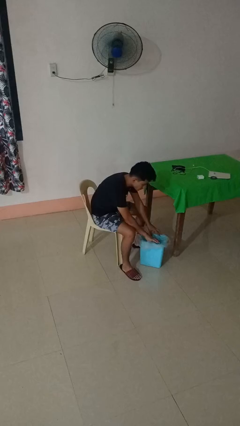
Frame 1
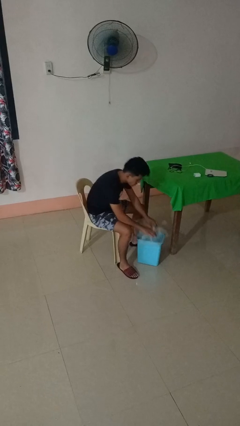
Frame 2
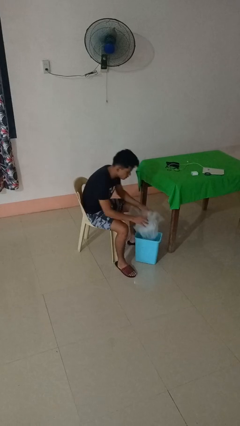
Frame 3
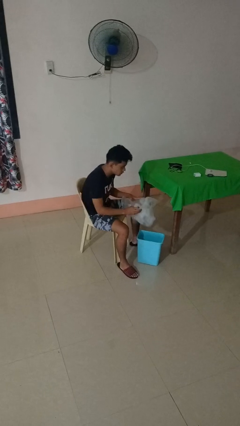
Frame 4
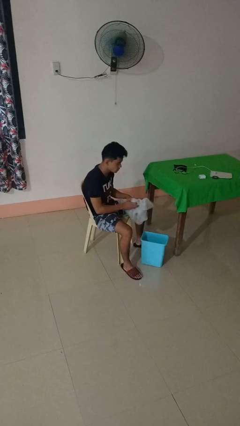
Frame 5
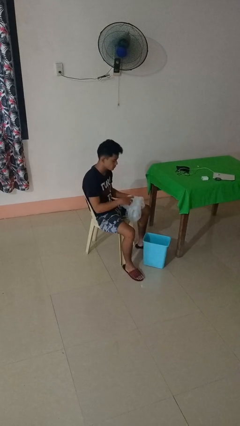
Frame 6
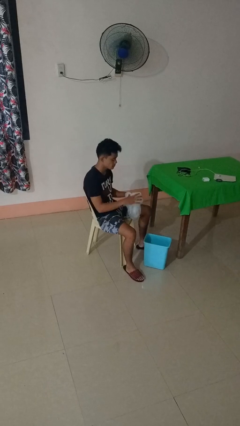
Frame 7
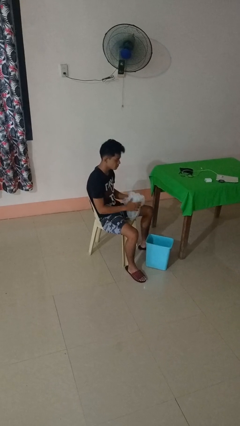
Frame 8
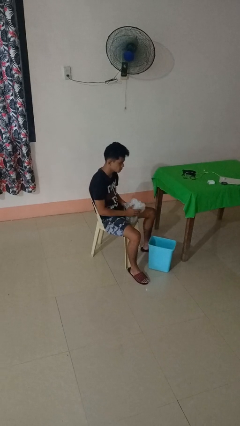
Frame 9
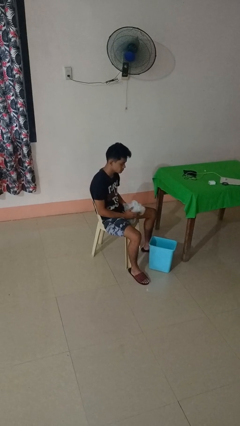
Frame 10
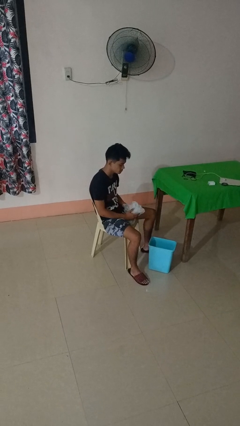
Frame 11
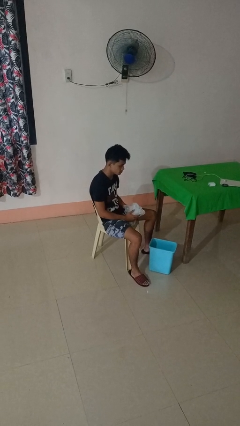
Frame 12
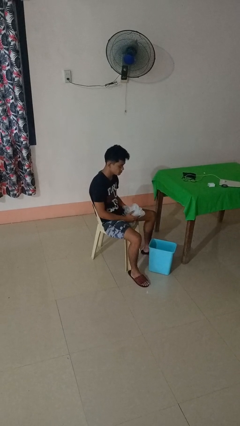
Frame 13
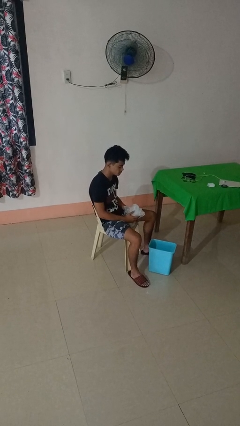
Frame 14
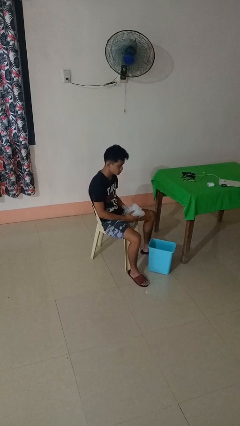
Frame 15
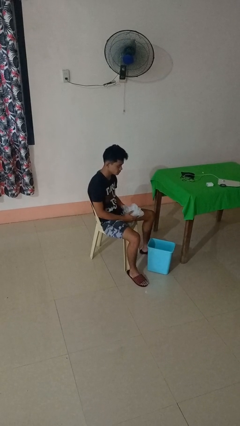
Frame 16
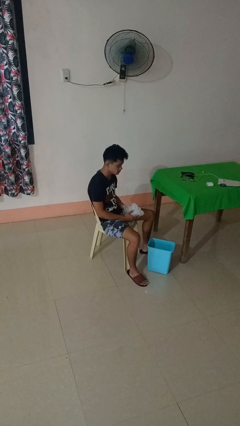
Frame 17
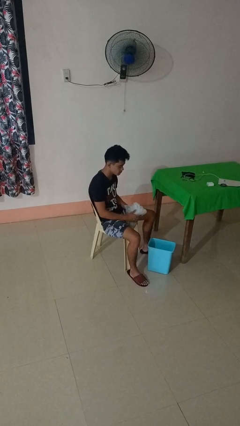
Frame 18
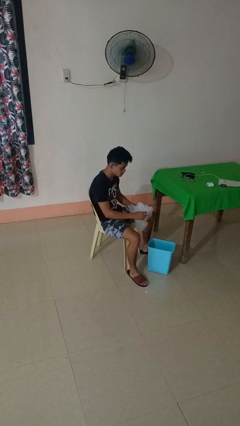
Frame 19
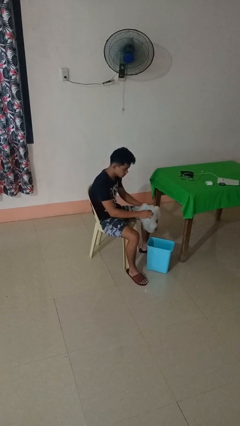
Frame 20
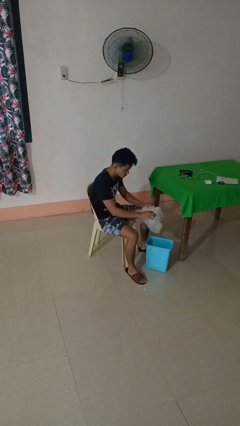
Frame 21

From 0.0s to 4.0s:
person removes trashbag from trashcan

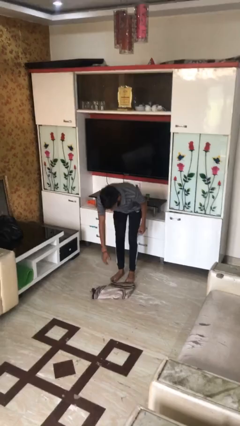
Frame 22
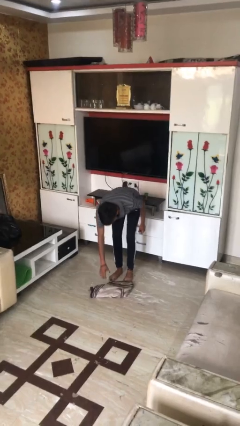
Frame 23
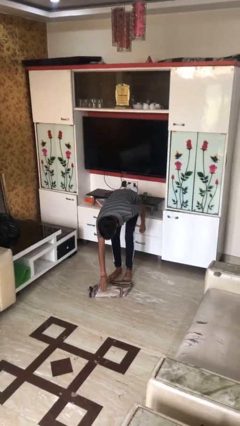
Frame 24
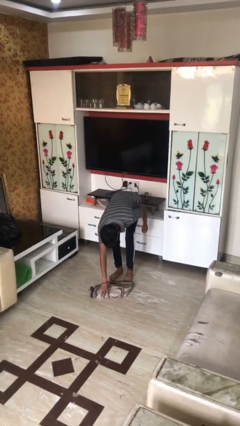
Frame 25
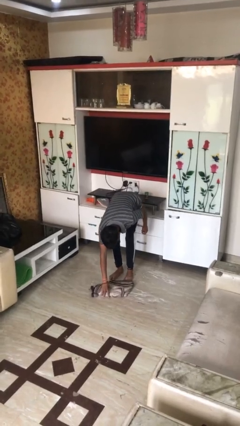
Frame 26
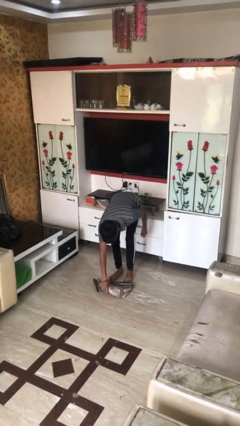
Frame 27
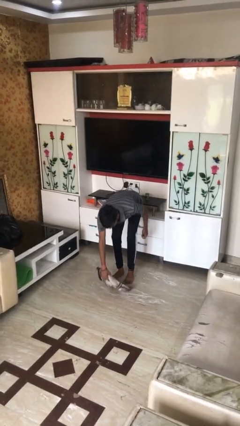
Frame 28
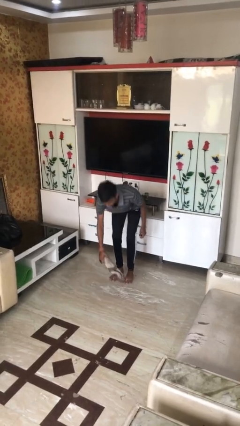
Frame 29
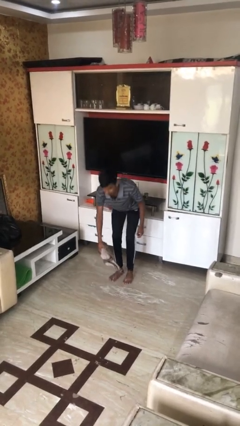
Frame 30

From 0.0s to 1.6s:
person picks up object from floor

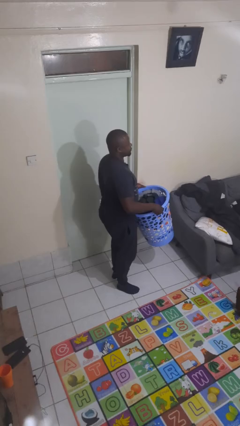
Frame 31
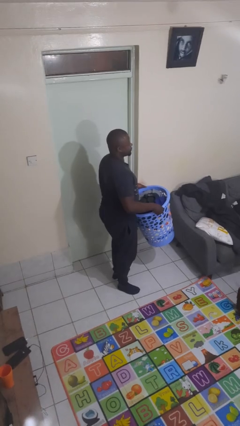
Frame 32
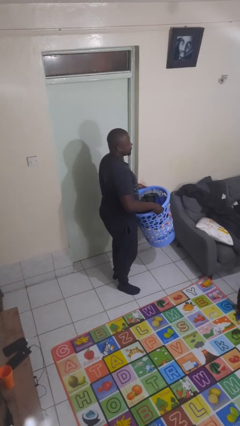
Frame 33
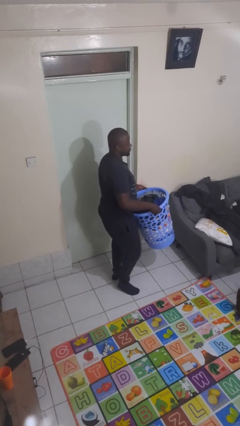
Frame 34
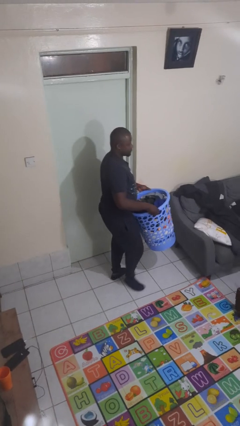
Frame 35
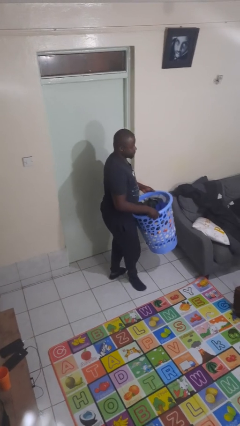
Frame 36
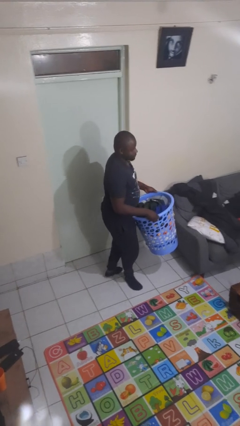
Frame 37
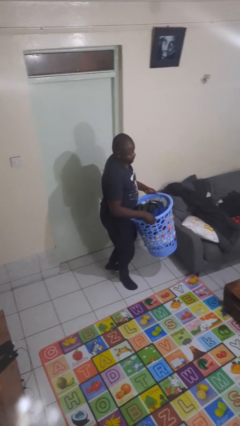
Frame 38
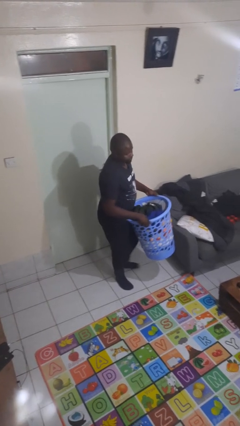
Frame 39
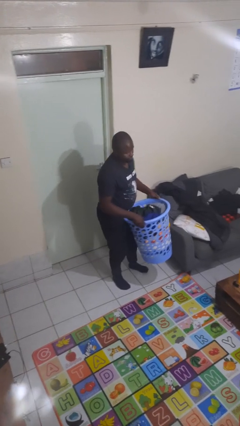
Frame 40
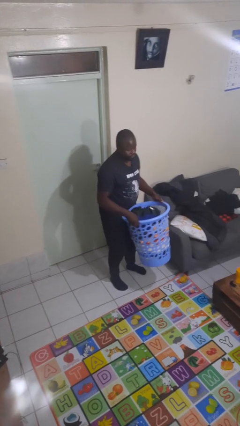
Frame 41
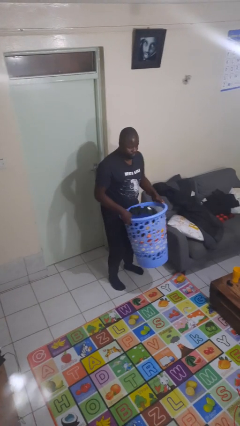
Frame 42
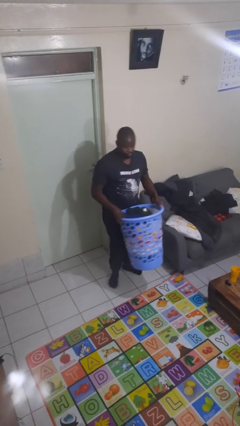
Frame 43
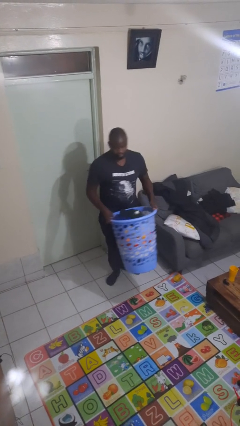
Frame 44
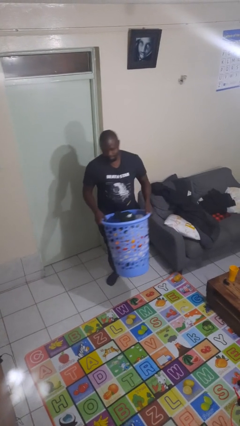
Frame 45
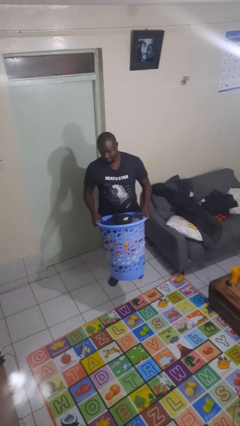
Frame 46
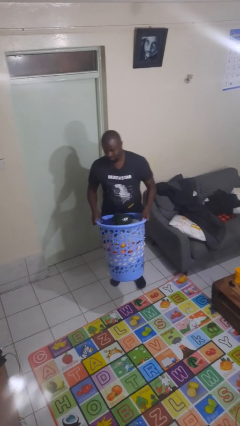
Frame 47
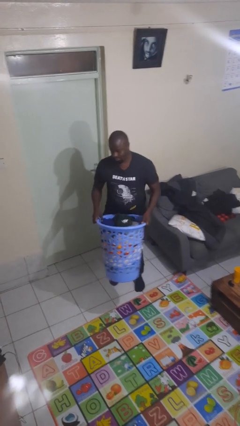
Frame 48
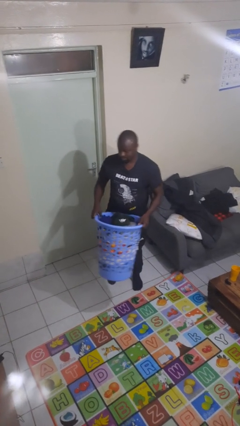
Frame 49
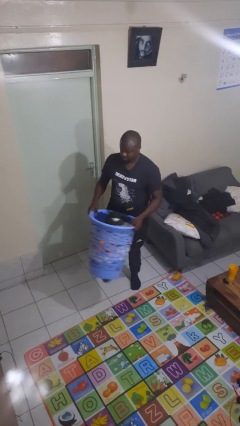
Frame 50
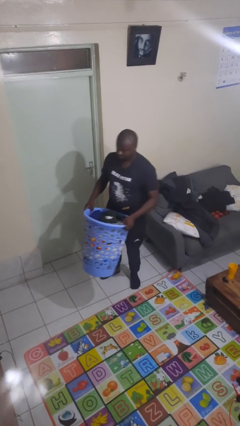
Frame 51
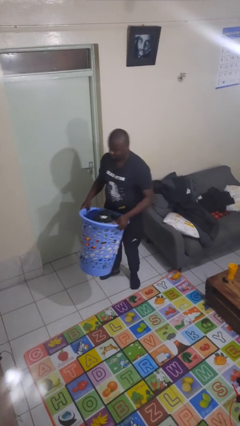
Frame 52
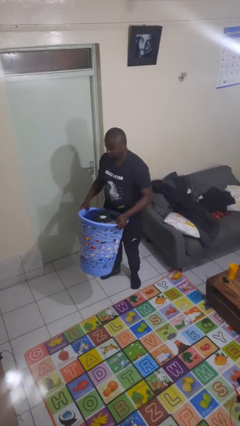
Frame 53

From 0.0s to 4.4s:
person carries laundry basket

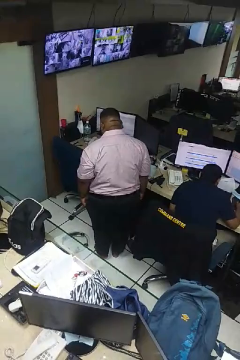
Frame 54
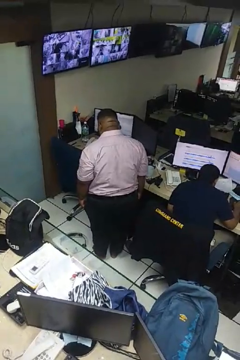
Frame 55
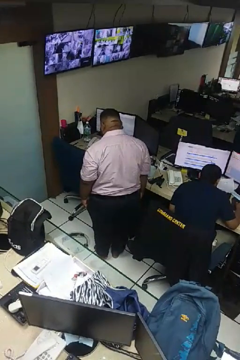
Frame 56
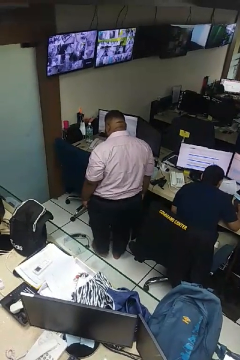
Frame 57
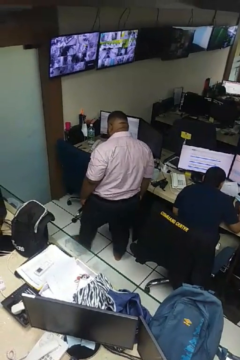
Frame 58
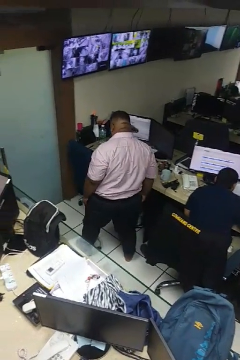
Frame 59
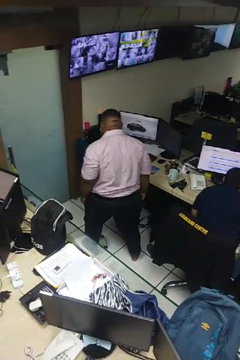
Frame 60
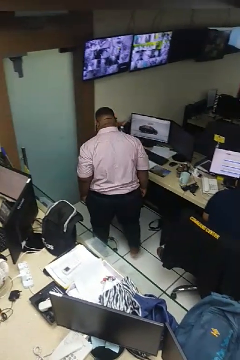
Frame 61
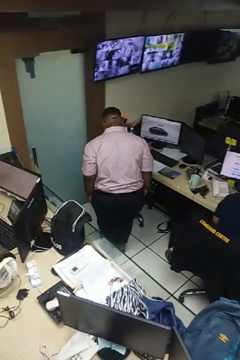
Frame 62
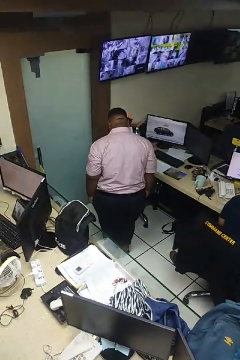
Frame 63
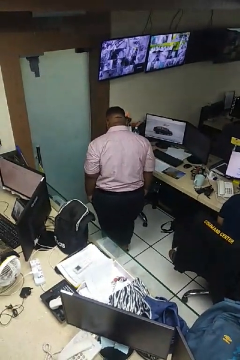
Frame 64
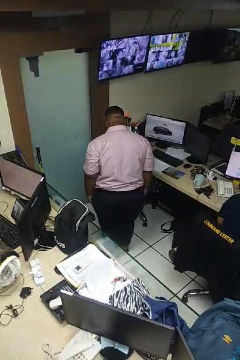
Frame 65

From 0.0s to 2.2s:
person uses bodyweight scale

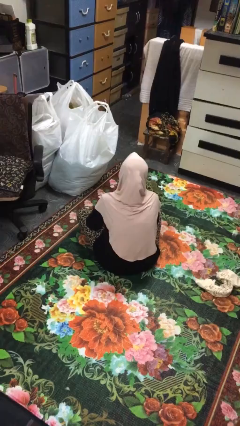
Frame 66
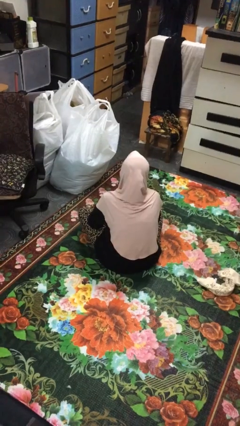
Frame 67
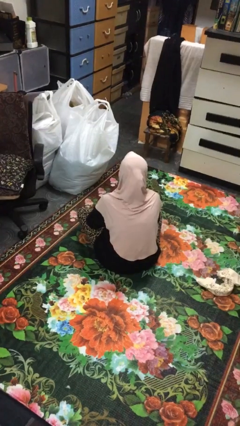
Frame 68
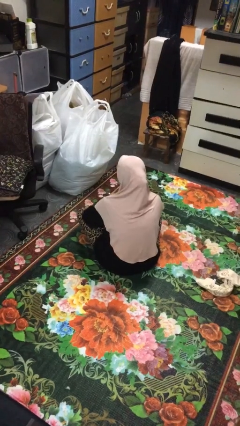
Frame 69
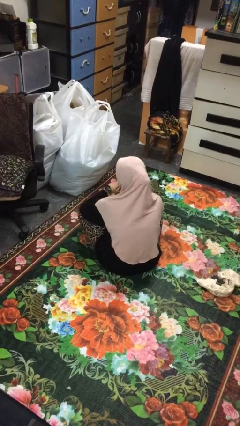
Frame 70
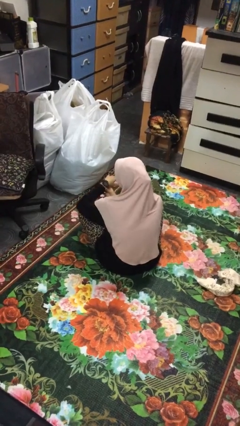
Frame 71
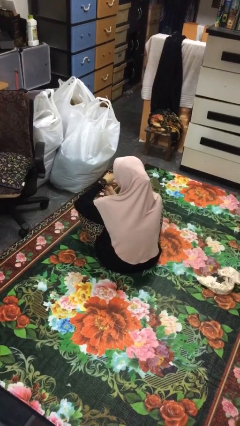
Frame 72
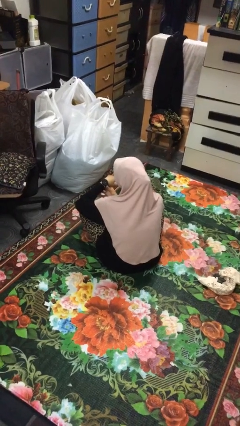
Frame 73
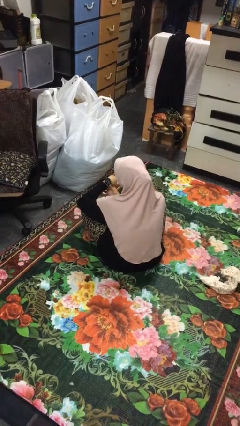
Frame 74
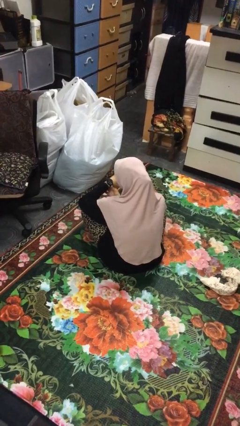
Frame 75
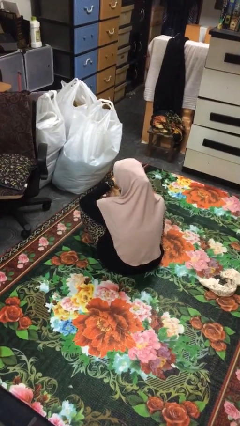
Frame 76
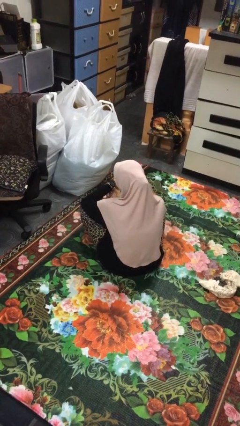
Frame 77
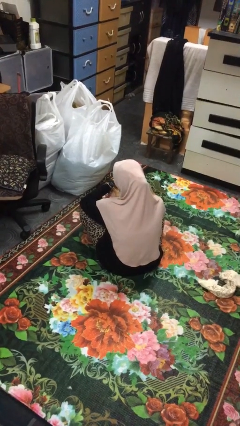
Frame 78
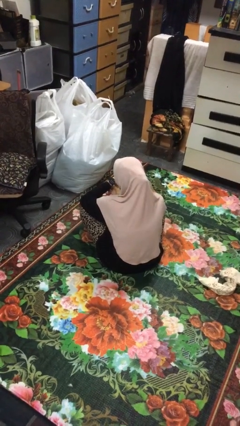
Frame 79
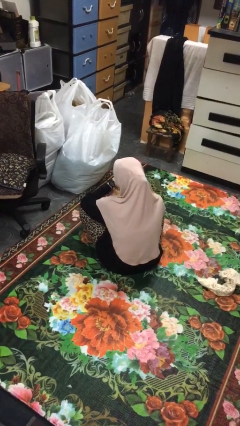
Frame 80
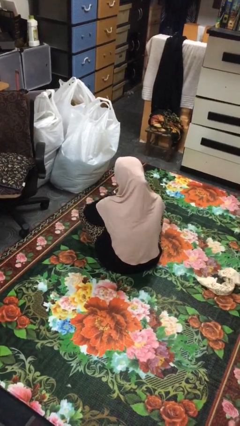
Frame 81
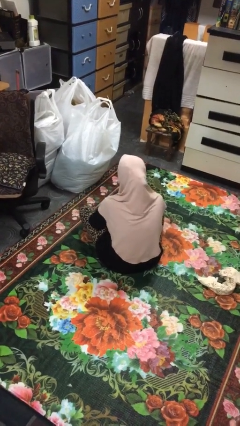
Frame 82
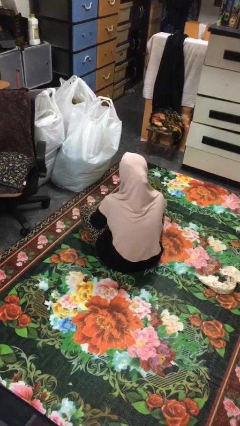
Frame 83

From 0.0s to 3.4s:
person looks at wristwatch

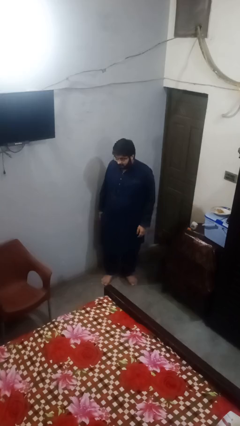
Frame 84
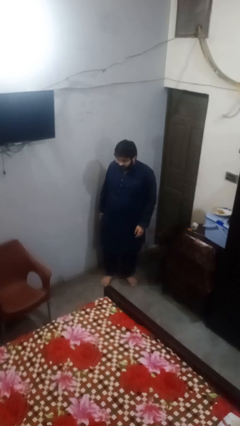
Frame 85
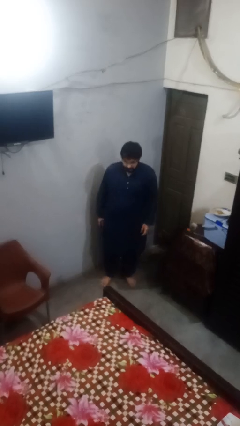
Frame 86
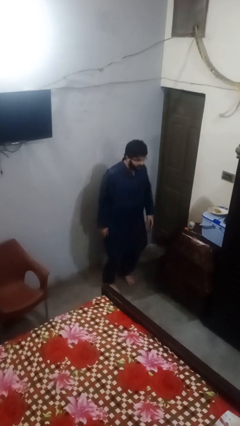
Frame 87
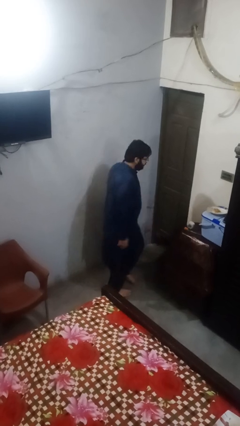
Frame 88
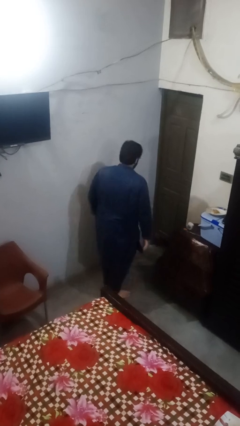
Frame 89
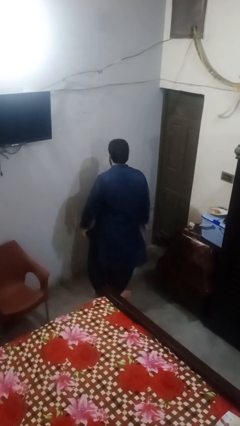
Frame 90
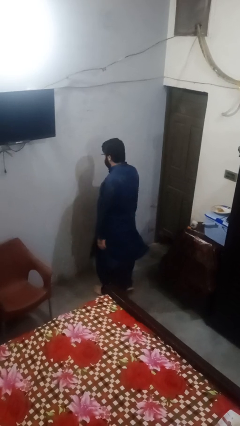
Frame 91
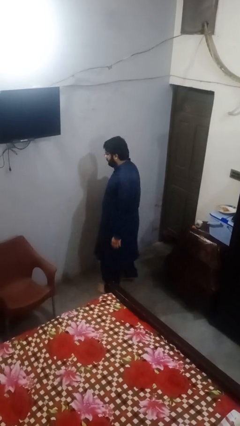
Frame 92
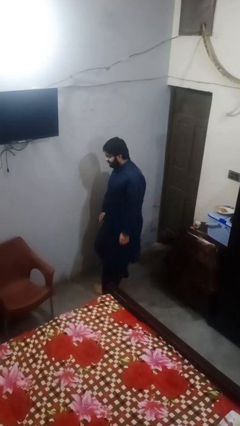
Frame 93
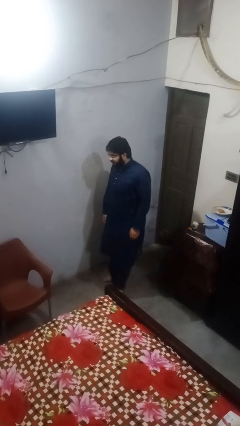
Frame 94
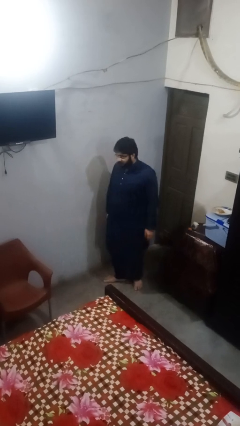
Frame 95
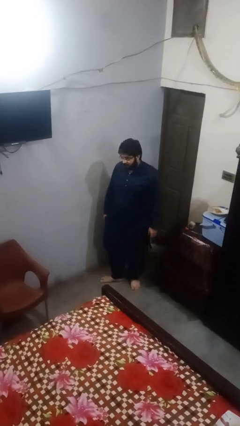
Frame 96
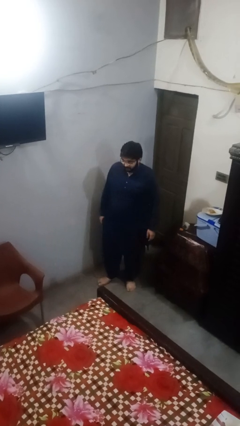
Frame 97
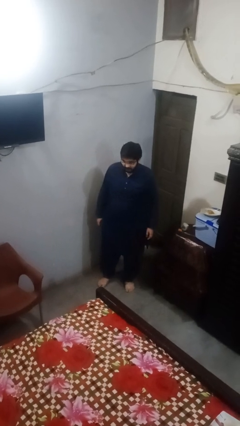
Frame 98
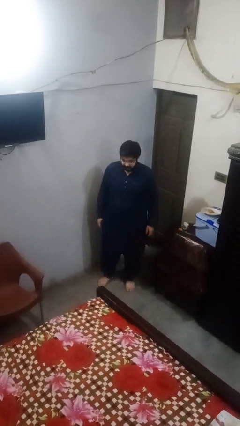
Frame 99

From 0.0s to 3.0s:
person twirls
